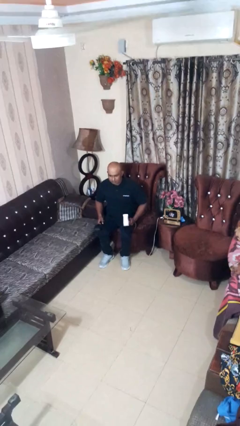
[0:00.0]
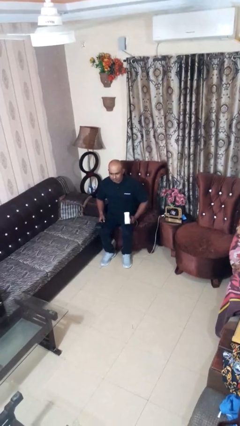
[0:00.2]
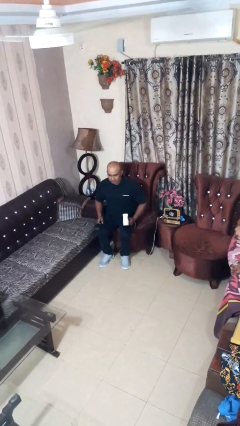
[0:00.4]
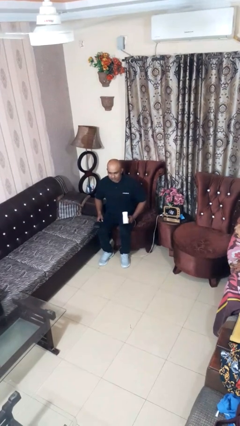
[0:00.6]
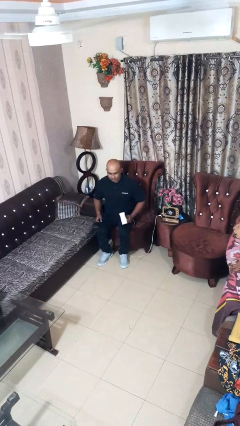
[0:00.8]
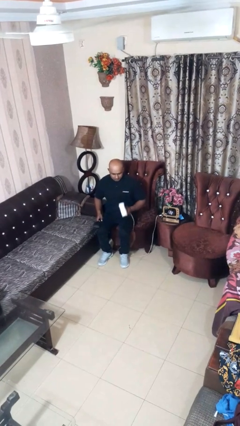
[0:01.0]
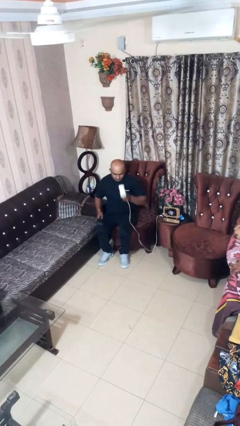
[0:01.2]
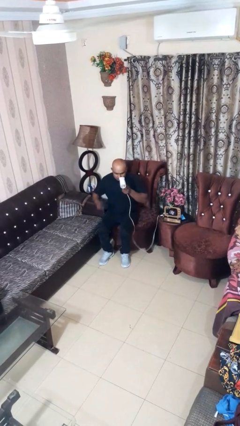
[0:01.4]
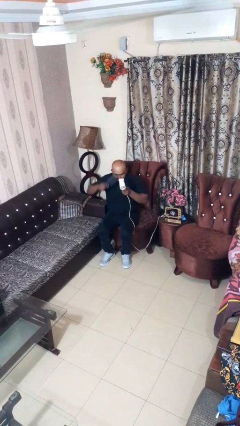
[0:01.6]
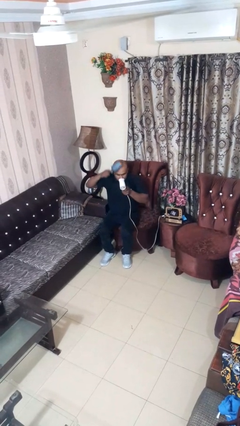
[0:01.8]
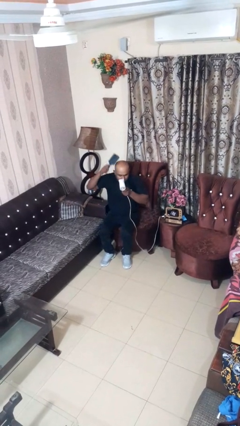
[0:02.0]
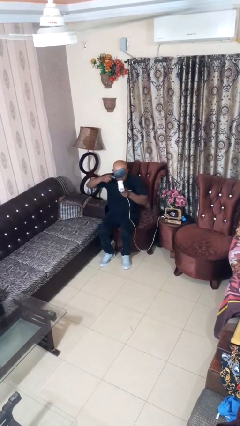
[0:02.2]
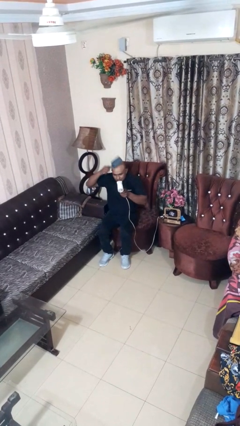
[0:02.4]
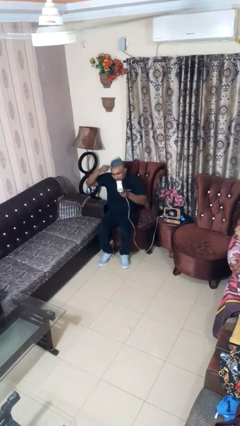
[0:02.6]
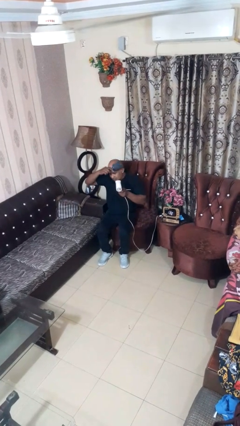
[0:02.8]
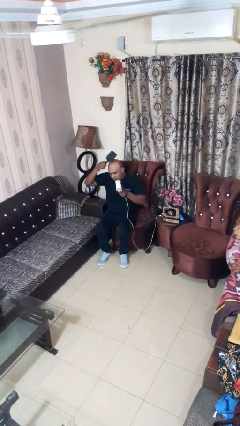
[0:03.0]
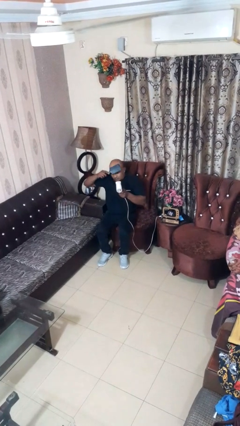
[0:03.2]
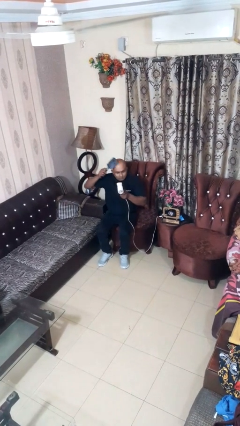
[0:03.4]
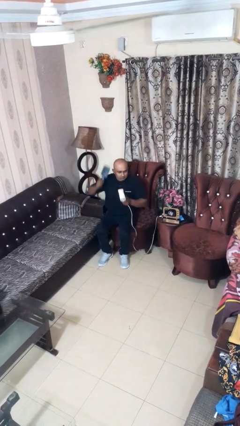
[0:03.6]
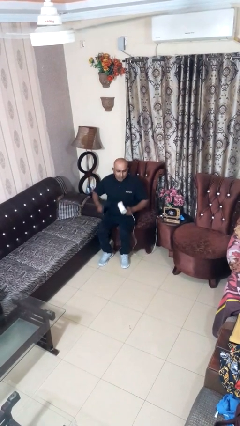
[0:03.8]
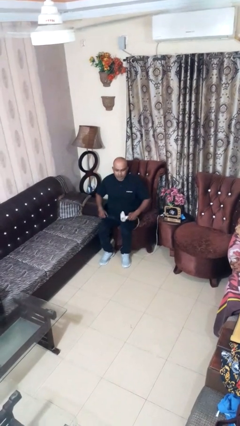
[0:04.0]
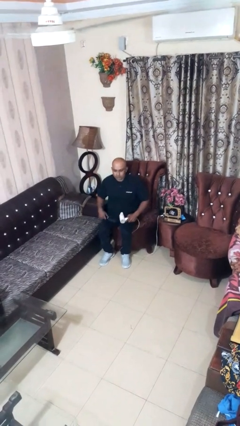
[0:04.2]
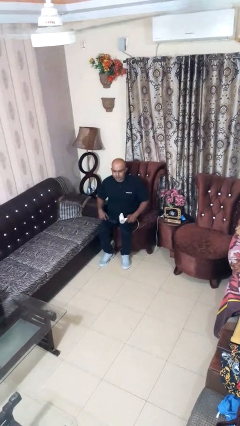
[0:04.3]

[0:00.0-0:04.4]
person dries hair with hairdryer

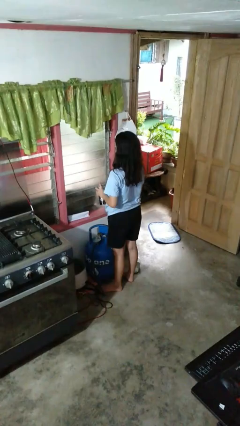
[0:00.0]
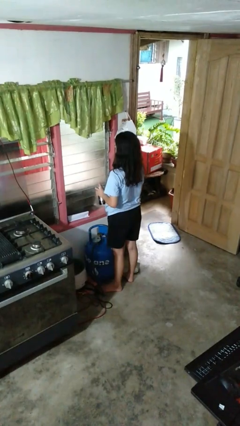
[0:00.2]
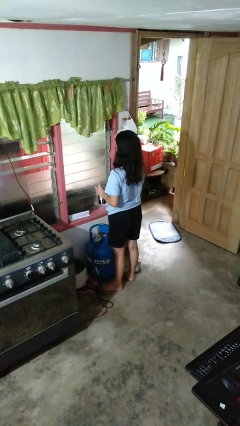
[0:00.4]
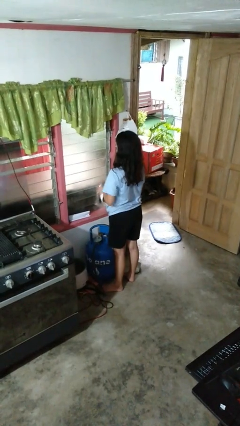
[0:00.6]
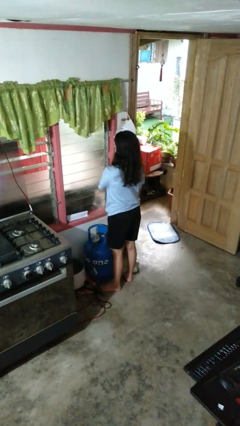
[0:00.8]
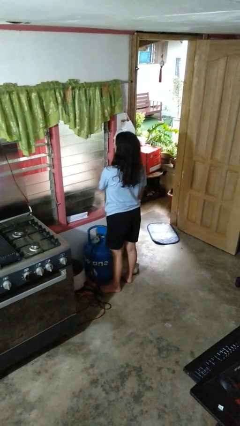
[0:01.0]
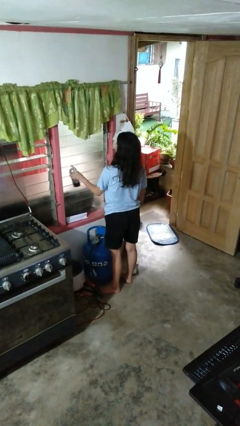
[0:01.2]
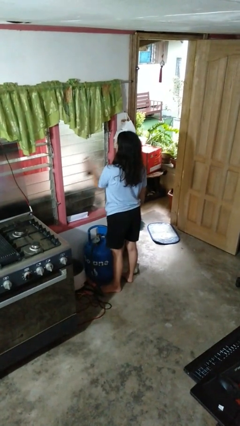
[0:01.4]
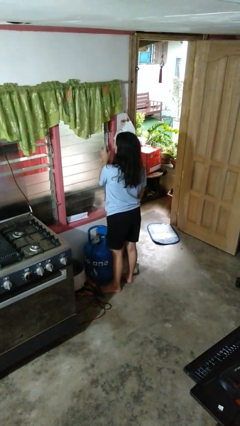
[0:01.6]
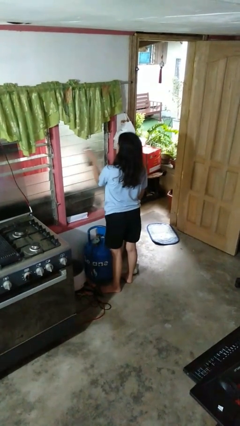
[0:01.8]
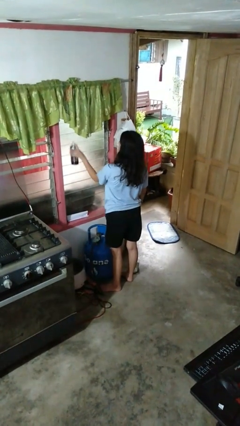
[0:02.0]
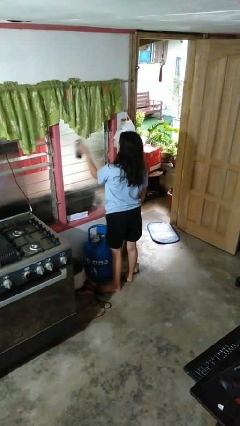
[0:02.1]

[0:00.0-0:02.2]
person sprays from bottle

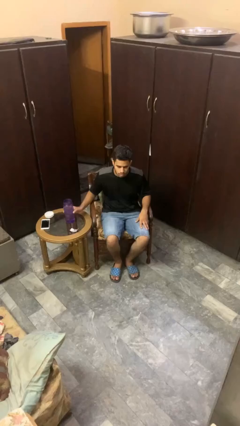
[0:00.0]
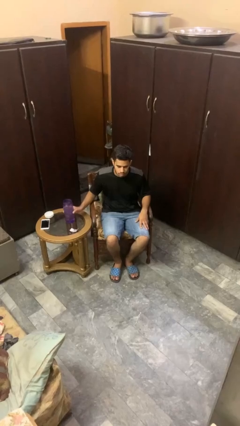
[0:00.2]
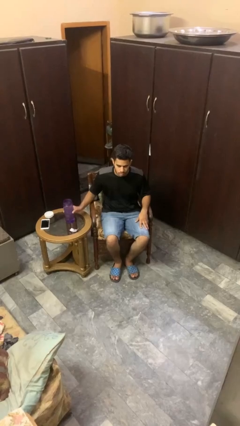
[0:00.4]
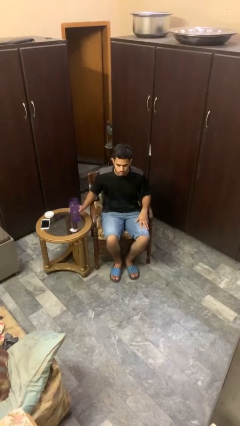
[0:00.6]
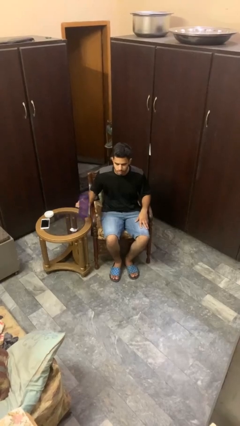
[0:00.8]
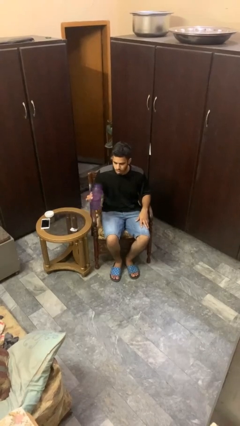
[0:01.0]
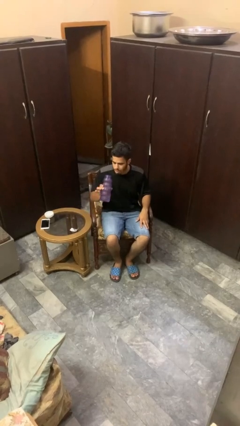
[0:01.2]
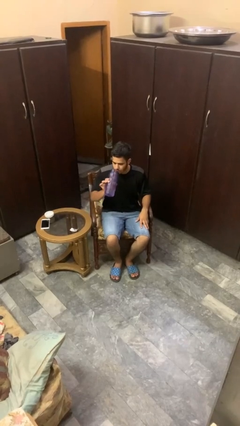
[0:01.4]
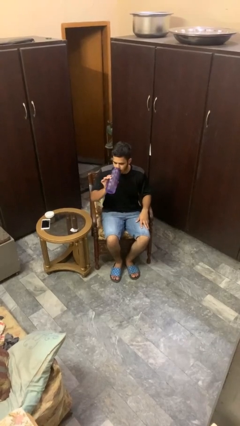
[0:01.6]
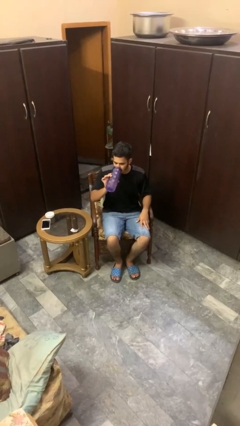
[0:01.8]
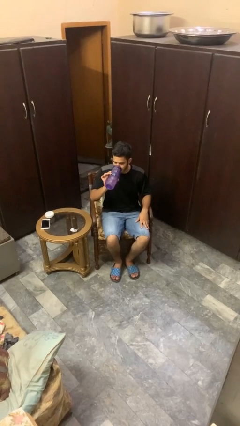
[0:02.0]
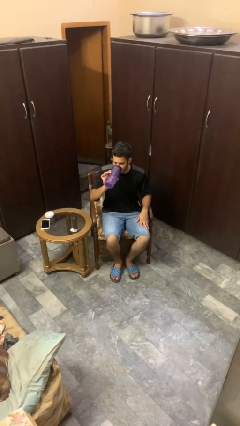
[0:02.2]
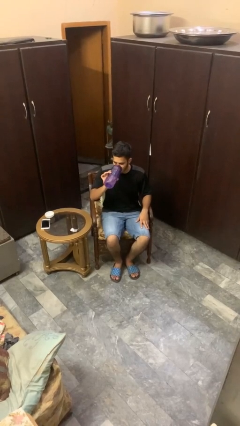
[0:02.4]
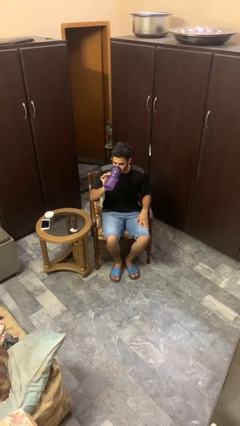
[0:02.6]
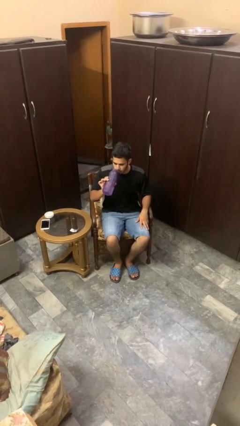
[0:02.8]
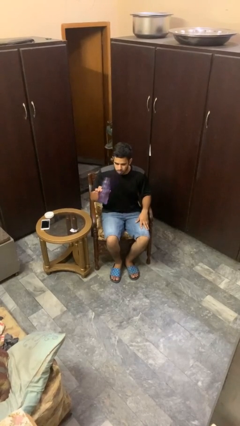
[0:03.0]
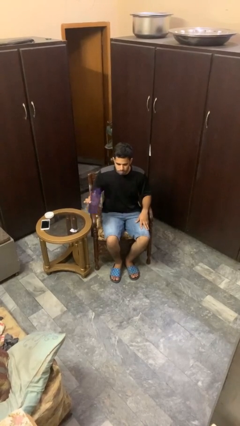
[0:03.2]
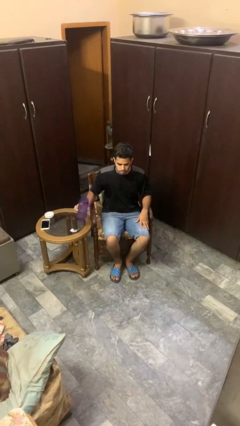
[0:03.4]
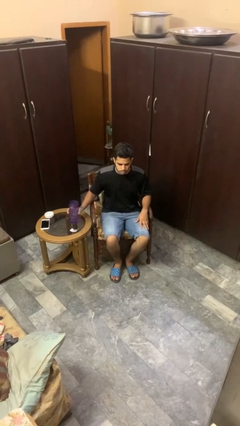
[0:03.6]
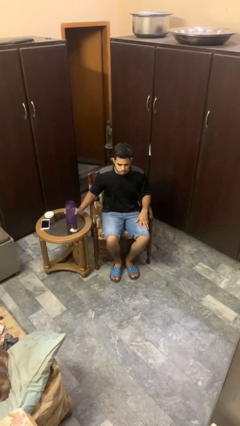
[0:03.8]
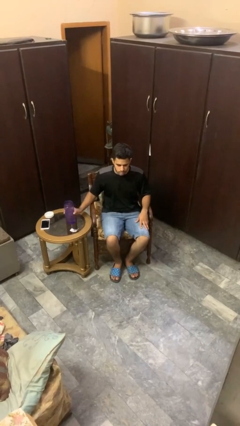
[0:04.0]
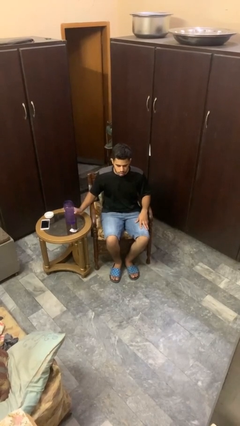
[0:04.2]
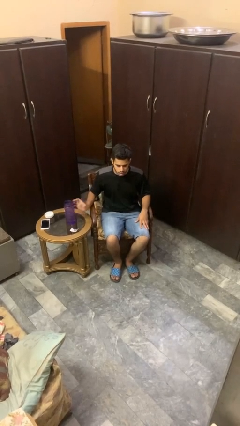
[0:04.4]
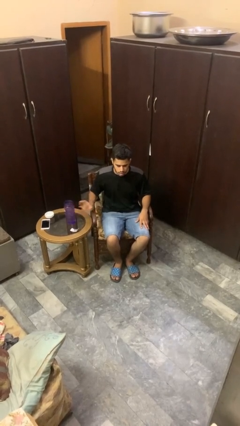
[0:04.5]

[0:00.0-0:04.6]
person drinks from cup

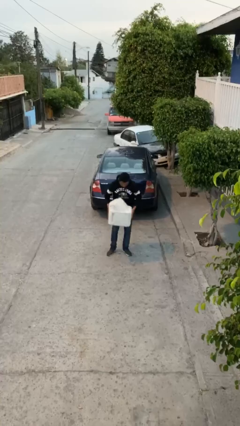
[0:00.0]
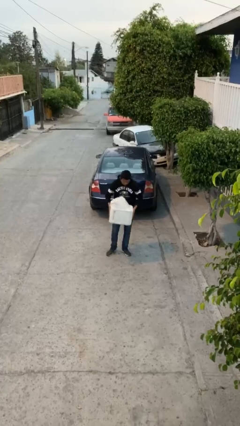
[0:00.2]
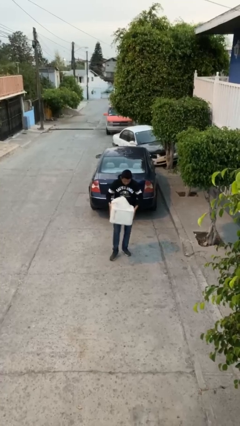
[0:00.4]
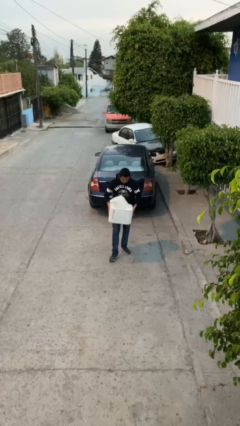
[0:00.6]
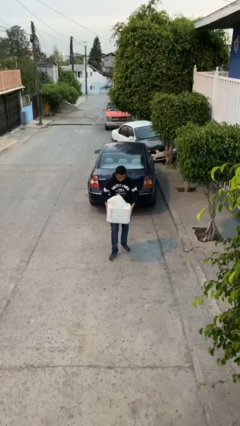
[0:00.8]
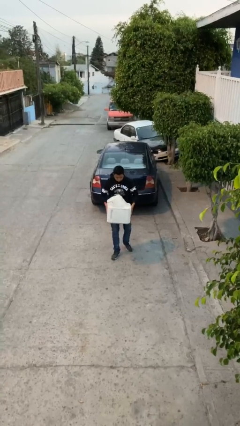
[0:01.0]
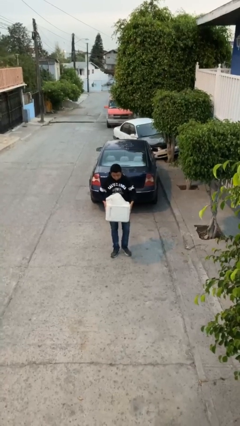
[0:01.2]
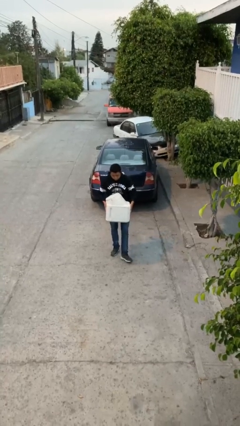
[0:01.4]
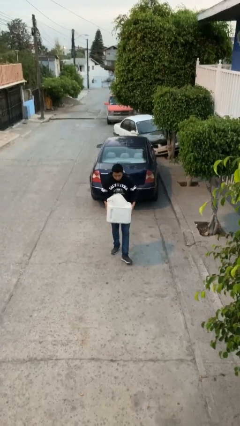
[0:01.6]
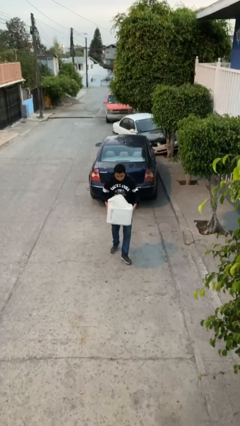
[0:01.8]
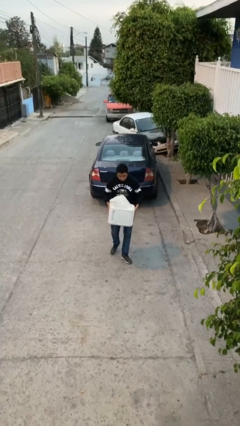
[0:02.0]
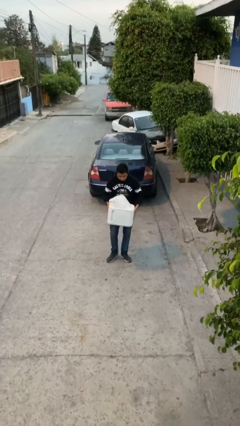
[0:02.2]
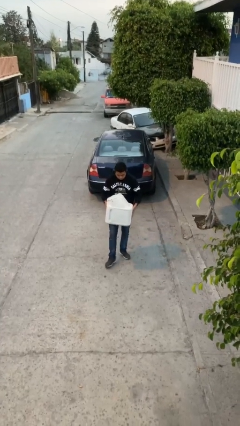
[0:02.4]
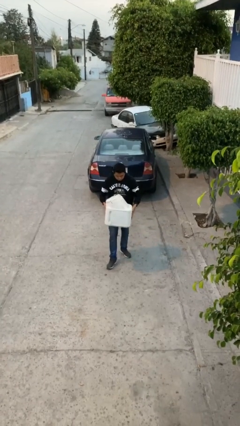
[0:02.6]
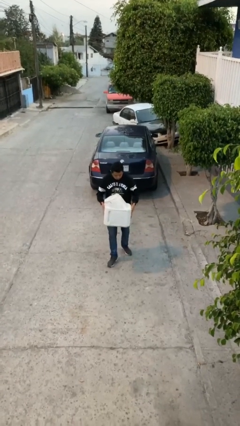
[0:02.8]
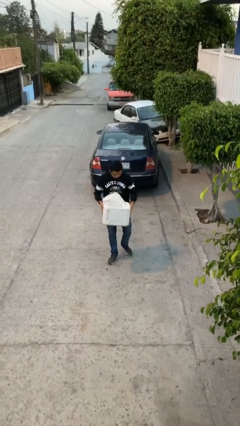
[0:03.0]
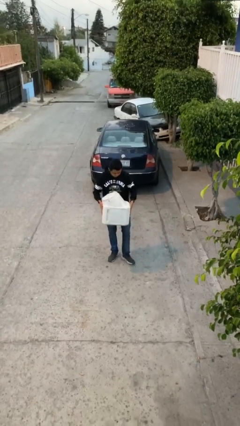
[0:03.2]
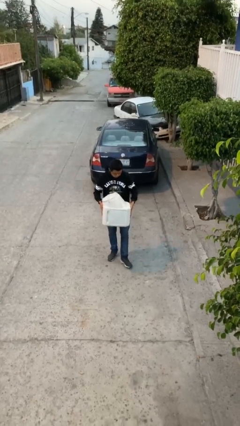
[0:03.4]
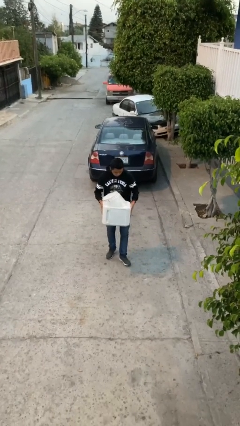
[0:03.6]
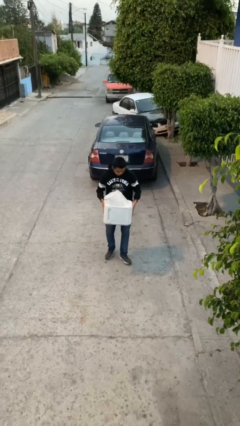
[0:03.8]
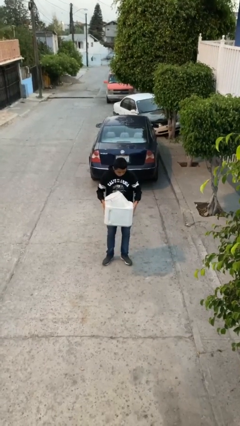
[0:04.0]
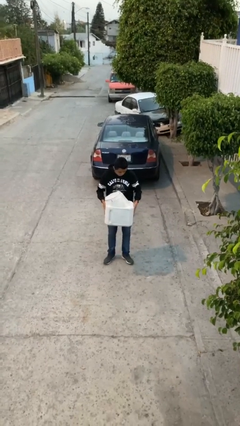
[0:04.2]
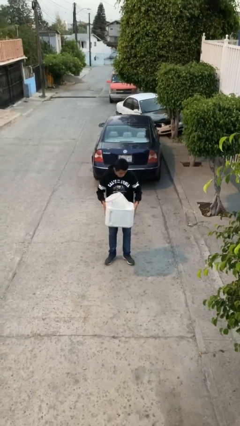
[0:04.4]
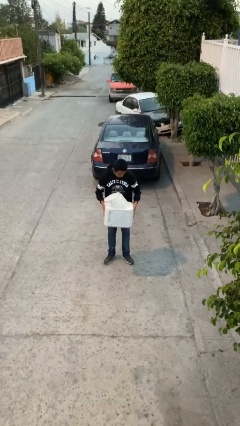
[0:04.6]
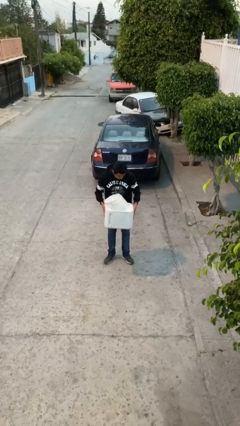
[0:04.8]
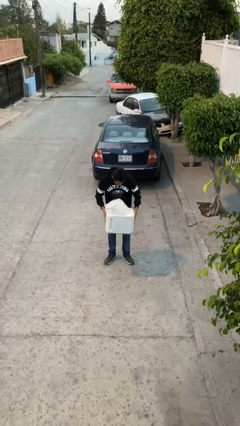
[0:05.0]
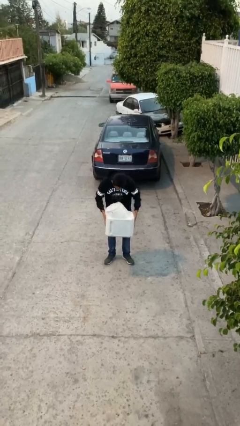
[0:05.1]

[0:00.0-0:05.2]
person carries heavy object

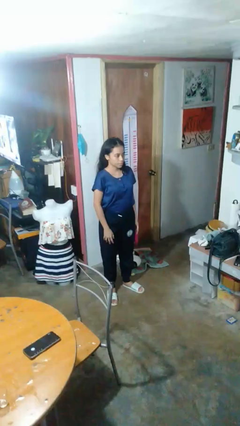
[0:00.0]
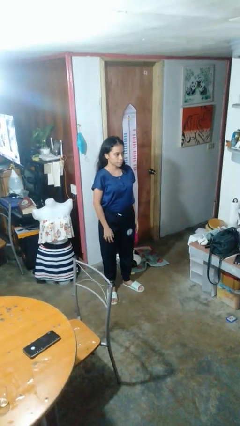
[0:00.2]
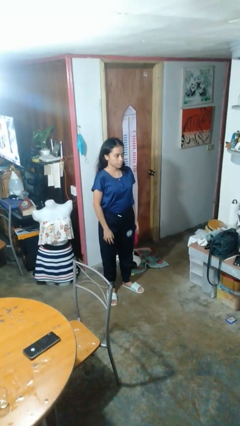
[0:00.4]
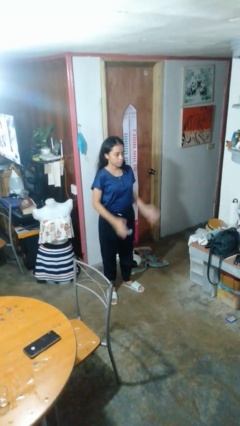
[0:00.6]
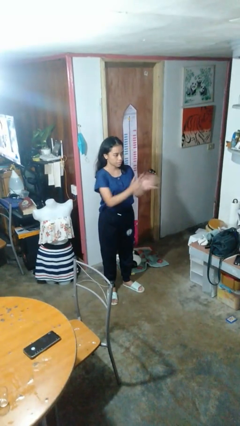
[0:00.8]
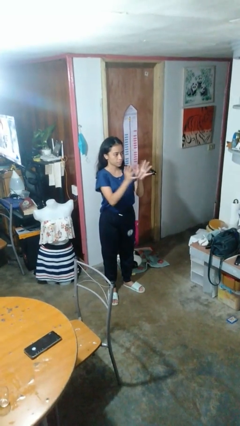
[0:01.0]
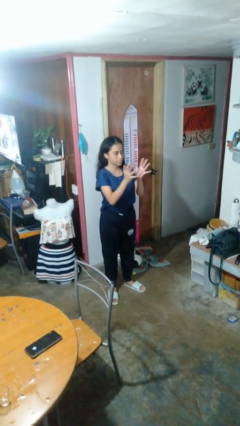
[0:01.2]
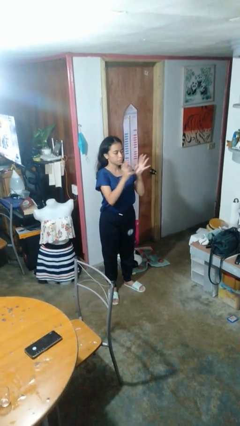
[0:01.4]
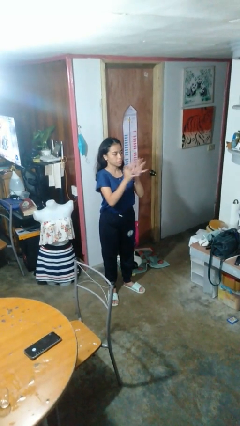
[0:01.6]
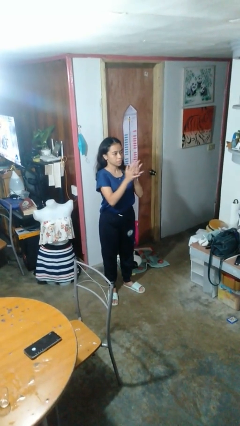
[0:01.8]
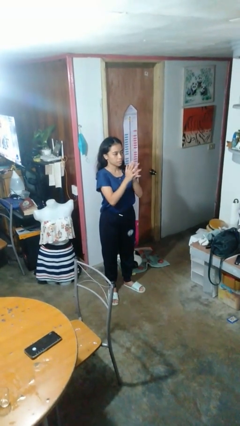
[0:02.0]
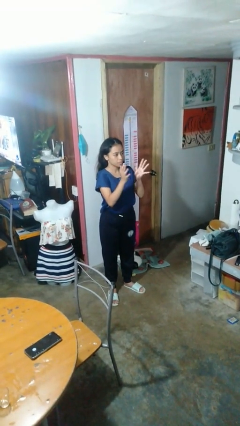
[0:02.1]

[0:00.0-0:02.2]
person claps hands
